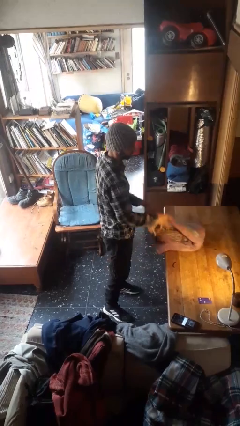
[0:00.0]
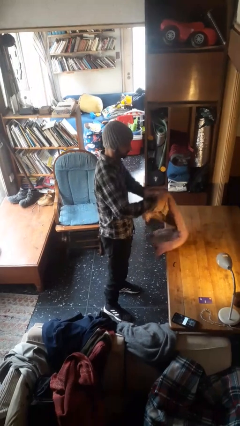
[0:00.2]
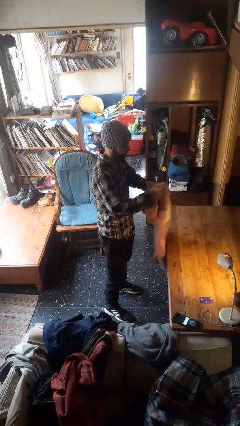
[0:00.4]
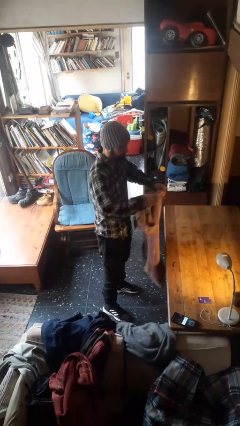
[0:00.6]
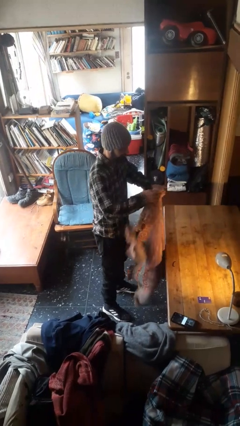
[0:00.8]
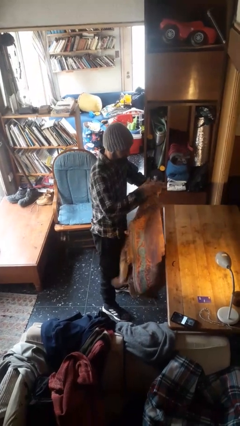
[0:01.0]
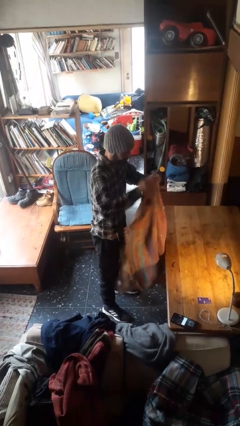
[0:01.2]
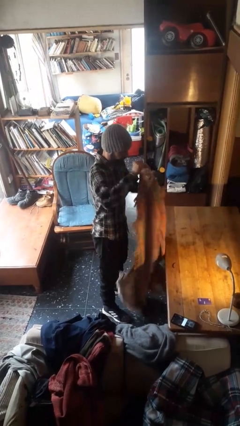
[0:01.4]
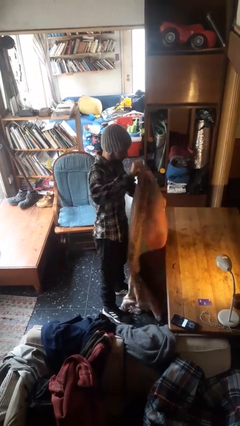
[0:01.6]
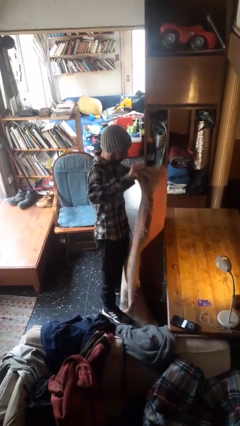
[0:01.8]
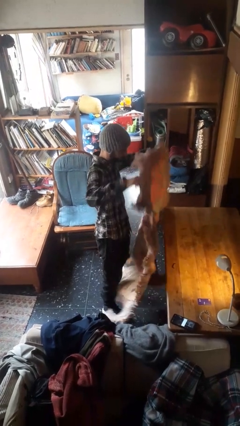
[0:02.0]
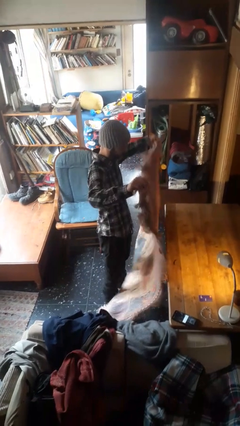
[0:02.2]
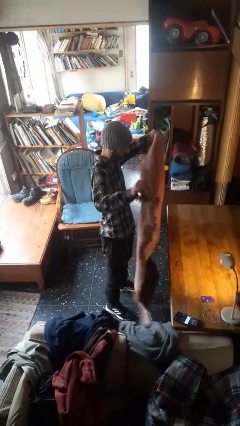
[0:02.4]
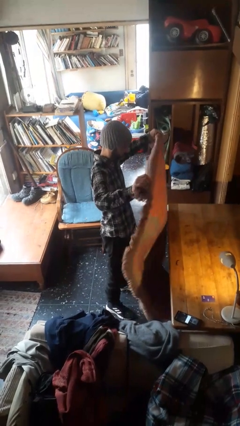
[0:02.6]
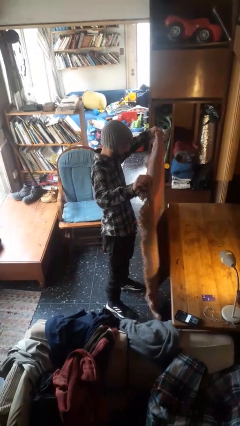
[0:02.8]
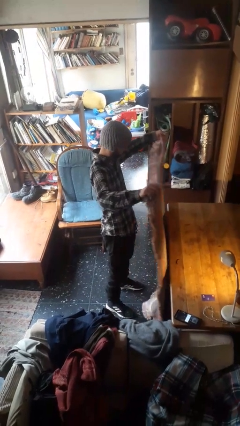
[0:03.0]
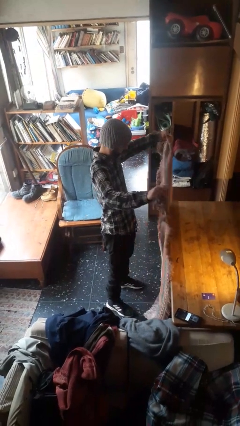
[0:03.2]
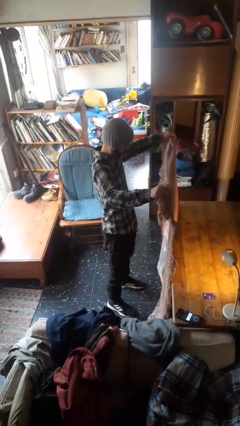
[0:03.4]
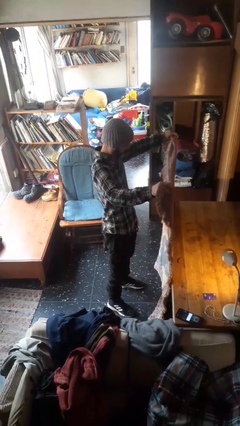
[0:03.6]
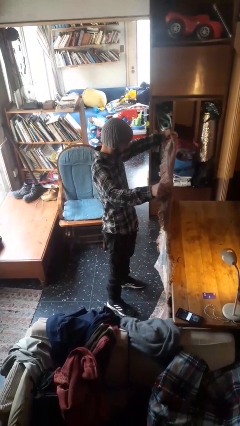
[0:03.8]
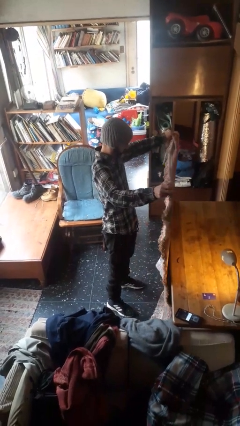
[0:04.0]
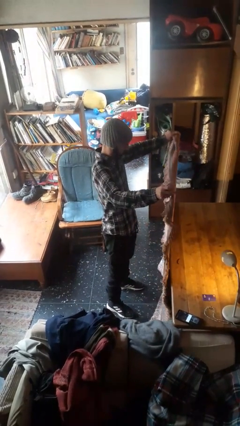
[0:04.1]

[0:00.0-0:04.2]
person unfolds blanket

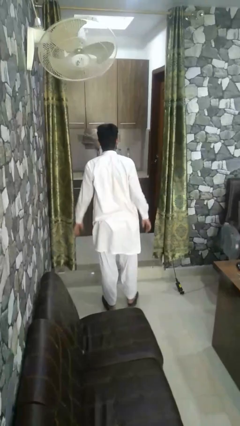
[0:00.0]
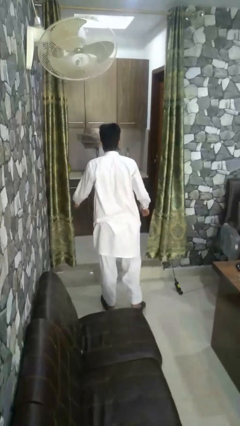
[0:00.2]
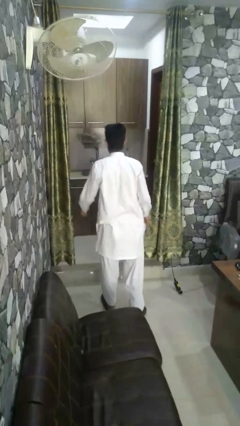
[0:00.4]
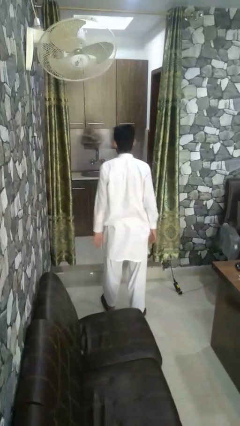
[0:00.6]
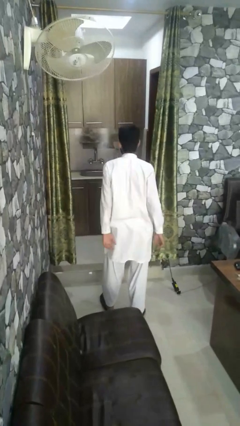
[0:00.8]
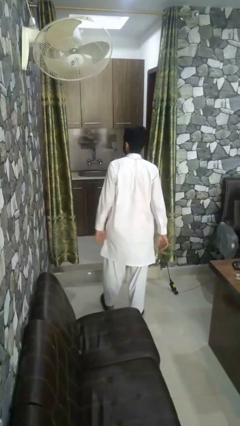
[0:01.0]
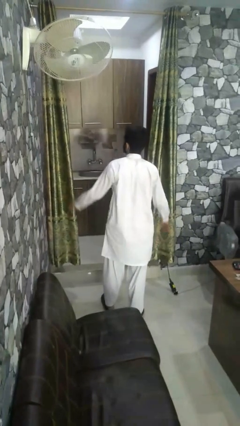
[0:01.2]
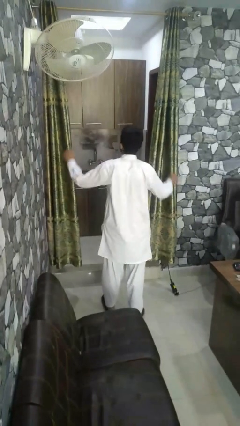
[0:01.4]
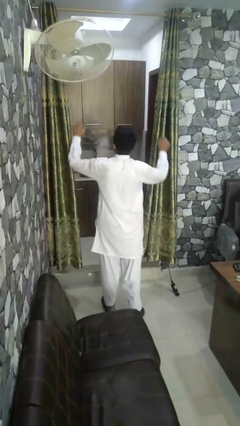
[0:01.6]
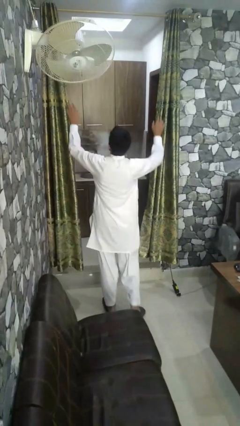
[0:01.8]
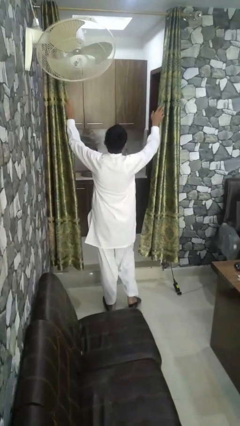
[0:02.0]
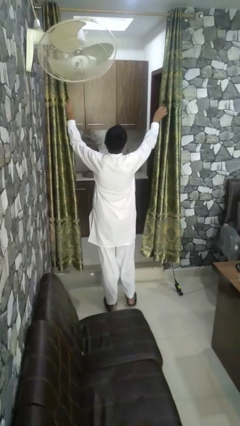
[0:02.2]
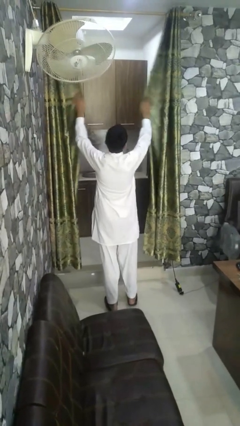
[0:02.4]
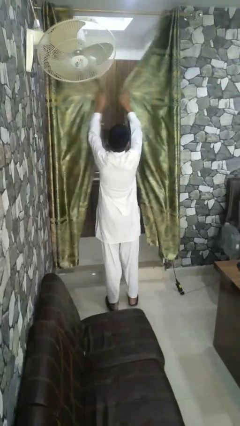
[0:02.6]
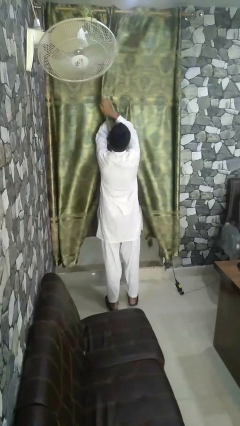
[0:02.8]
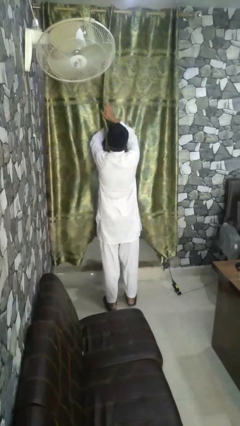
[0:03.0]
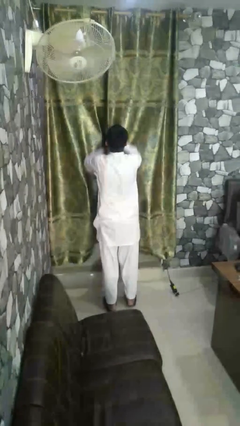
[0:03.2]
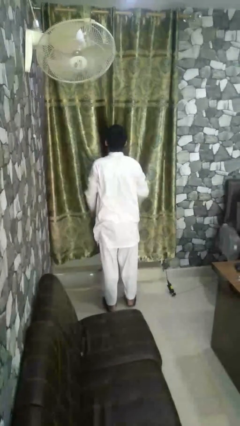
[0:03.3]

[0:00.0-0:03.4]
person closes curtains

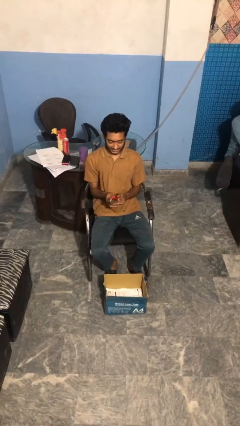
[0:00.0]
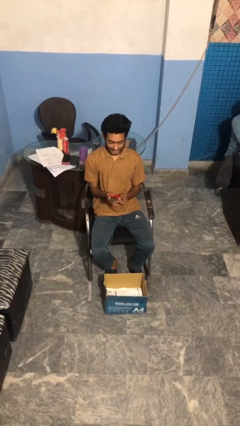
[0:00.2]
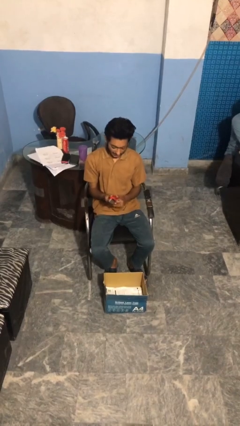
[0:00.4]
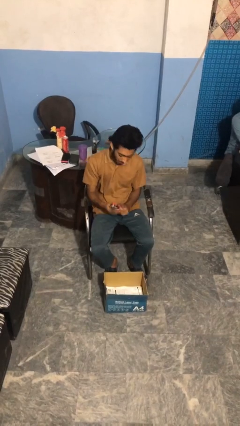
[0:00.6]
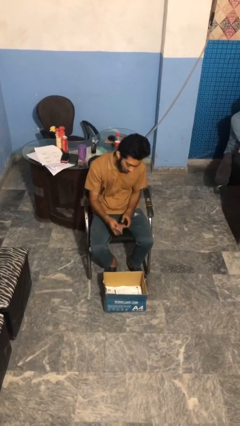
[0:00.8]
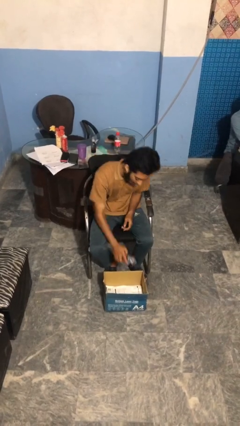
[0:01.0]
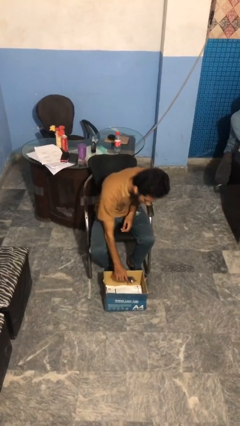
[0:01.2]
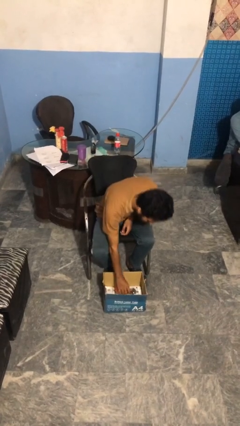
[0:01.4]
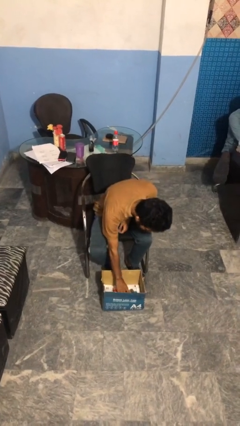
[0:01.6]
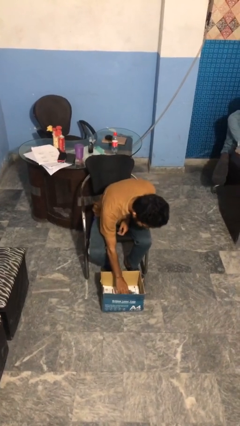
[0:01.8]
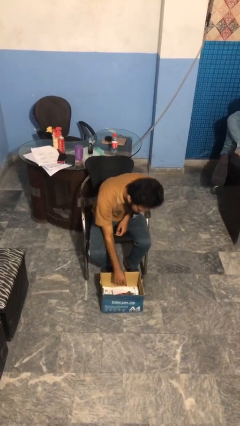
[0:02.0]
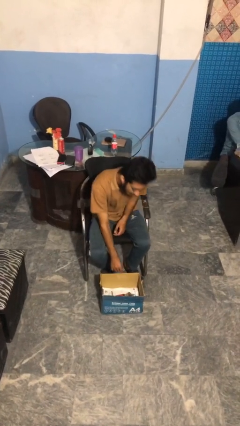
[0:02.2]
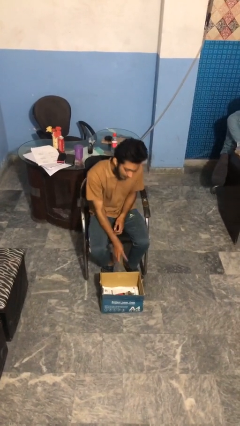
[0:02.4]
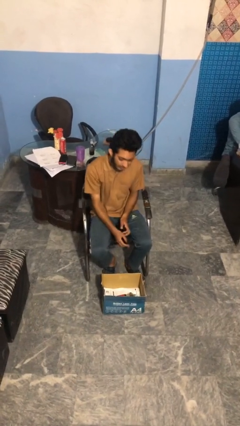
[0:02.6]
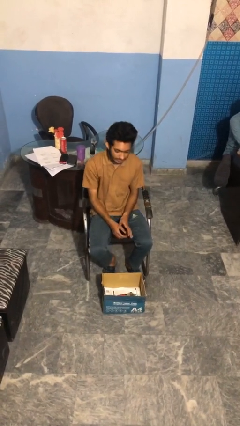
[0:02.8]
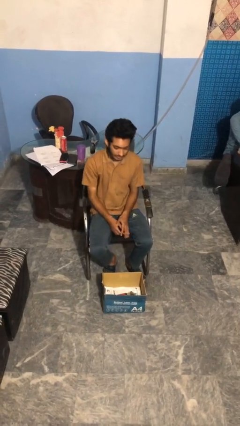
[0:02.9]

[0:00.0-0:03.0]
person puts object into box

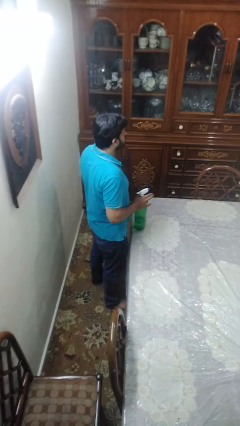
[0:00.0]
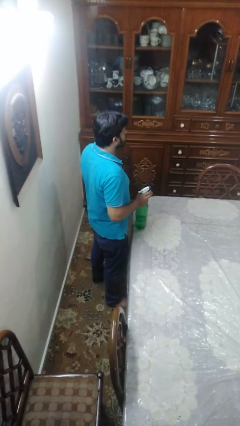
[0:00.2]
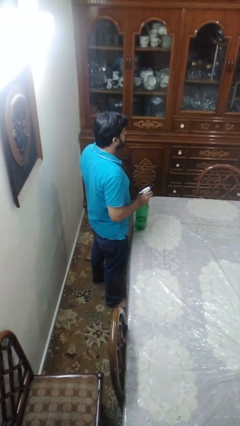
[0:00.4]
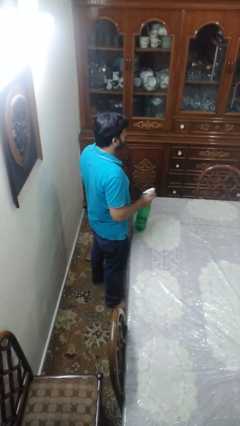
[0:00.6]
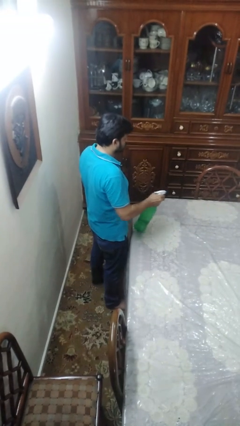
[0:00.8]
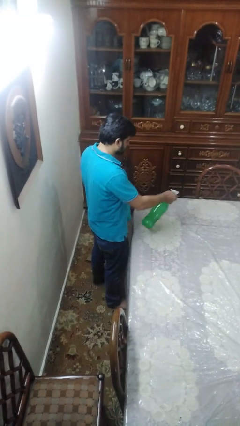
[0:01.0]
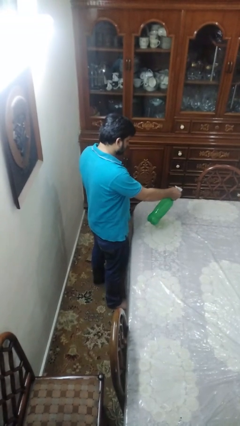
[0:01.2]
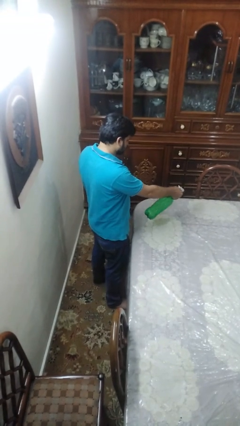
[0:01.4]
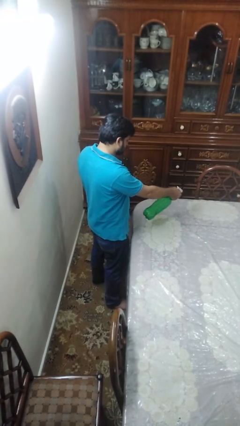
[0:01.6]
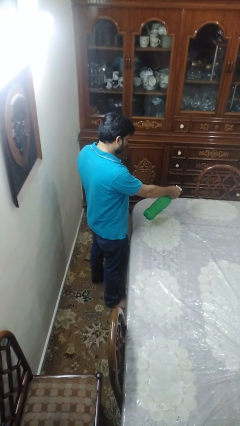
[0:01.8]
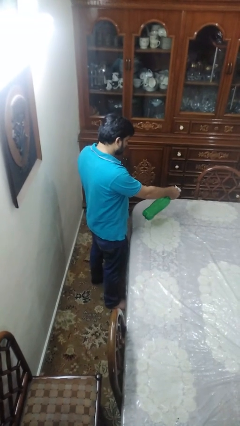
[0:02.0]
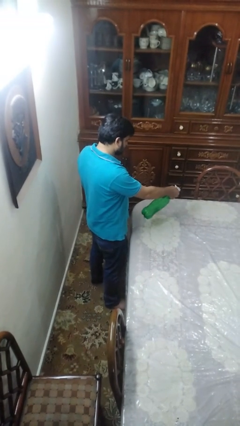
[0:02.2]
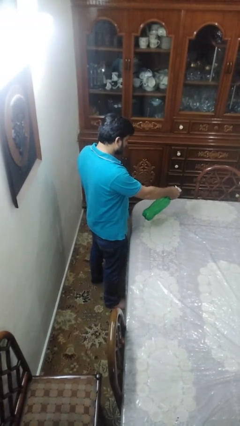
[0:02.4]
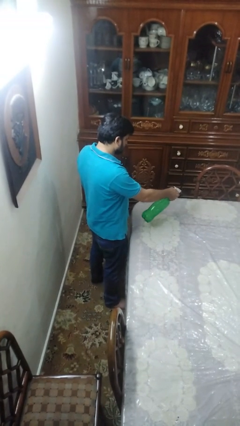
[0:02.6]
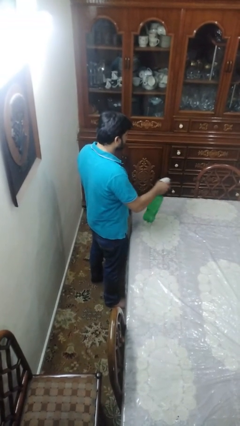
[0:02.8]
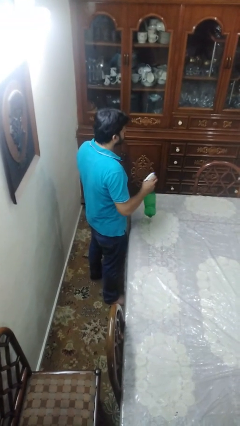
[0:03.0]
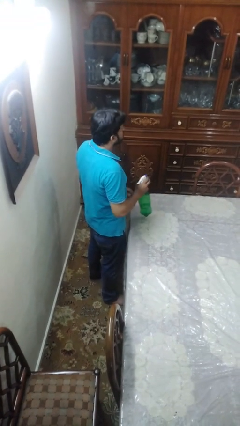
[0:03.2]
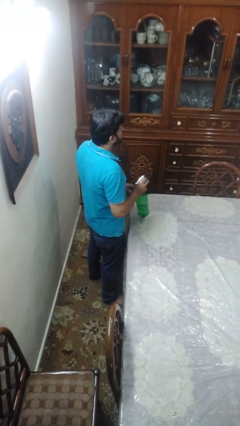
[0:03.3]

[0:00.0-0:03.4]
person sprays from bottle

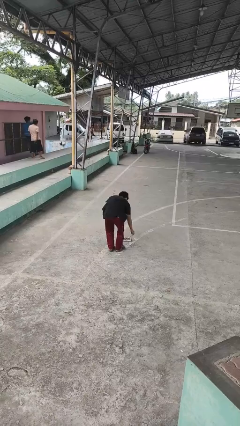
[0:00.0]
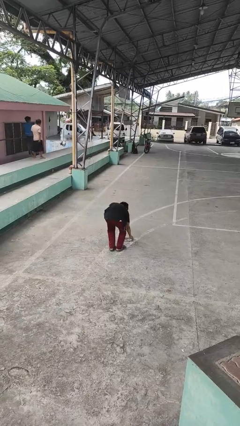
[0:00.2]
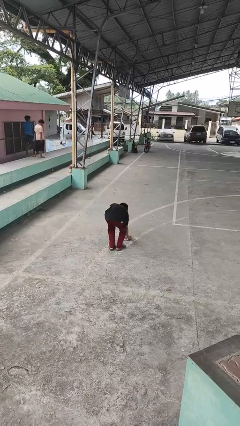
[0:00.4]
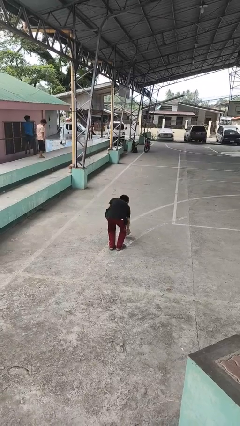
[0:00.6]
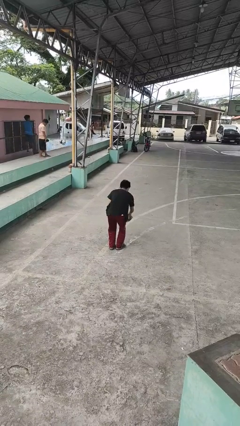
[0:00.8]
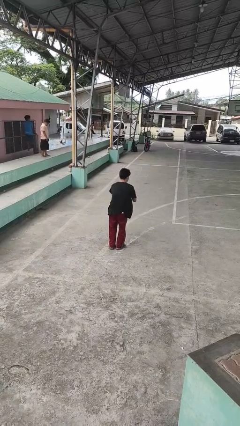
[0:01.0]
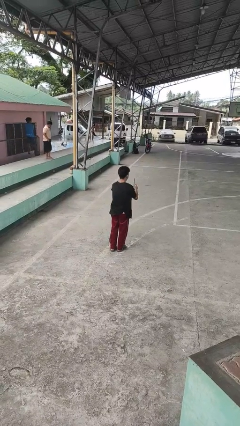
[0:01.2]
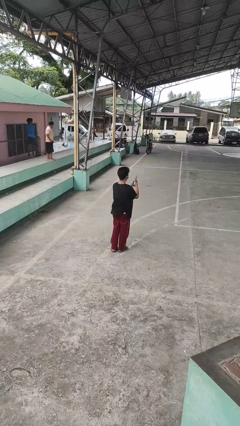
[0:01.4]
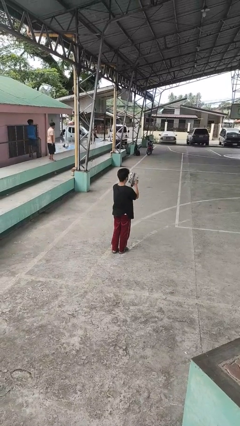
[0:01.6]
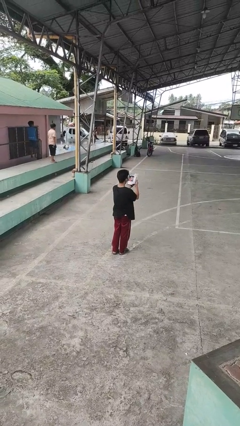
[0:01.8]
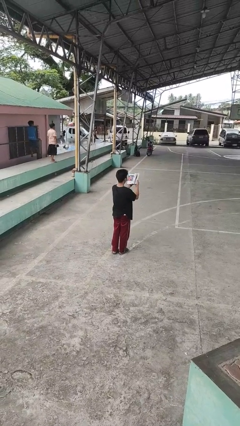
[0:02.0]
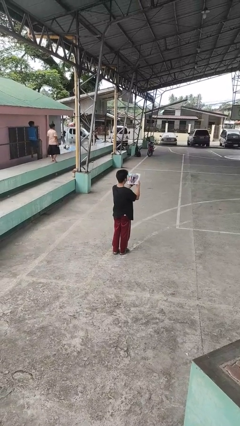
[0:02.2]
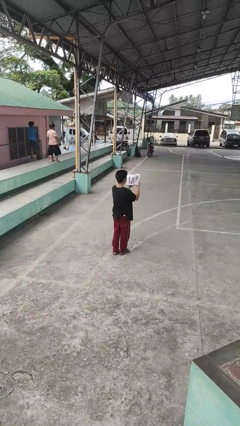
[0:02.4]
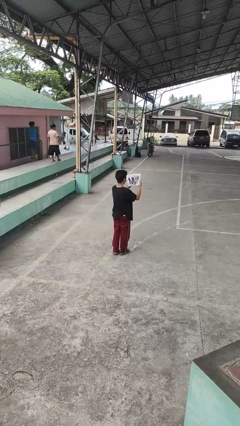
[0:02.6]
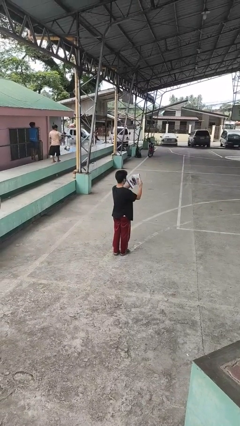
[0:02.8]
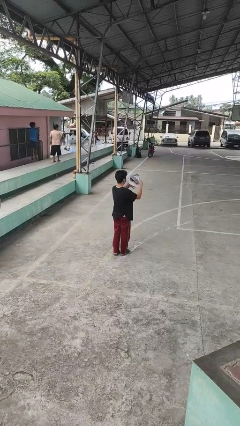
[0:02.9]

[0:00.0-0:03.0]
person picks up object from floor

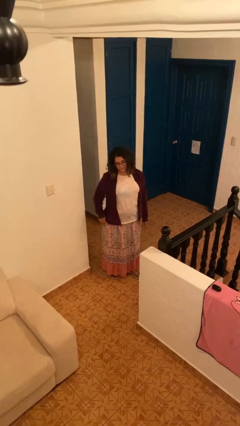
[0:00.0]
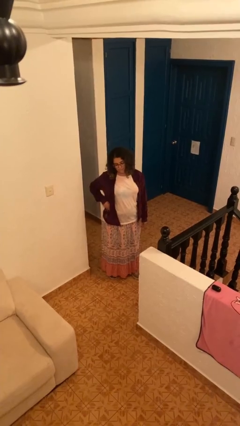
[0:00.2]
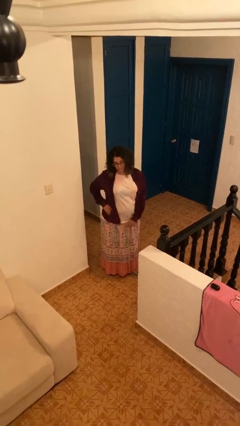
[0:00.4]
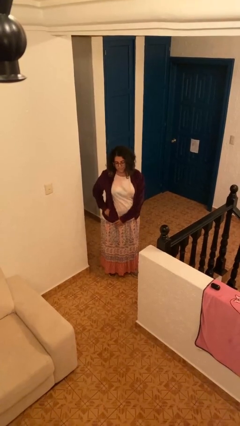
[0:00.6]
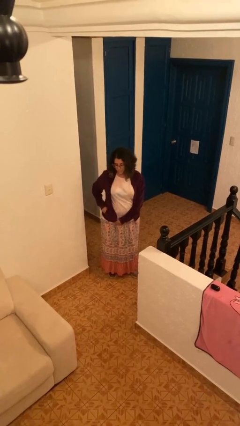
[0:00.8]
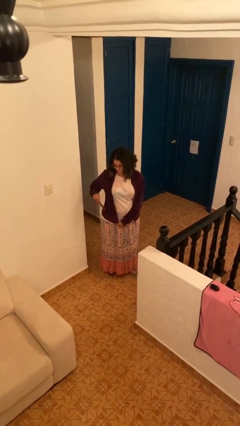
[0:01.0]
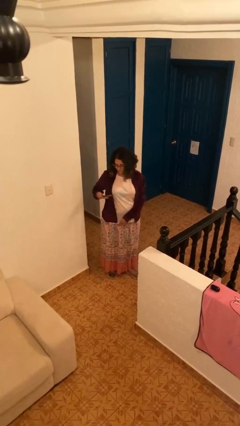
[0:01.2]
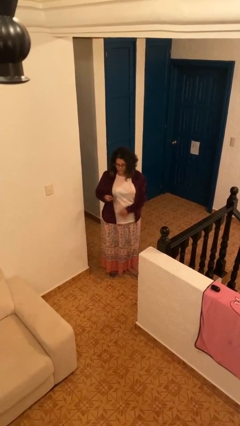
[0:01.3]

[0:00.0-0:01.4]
person takes phone from pocket
